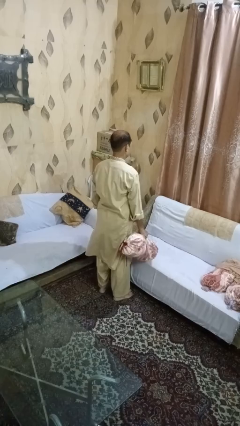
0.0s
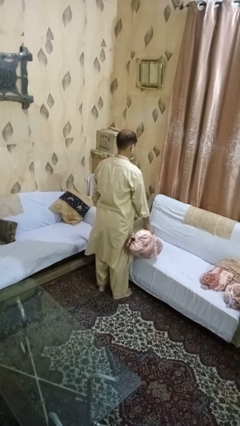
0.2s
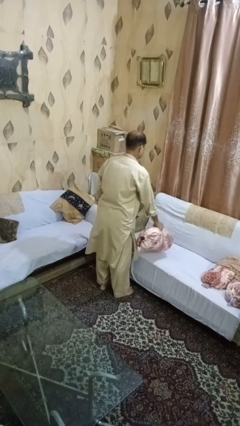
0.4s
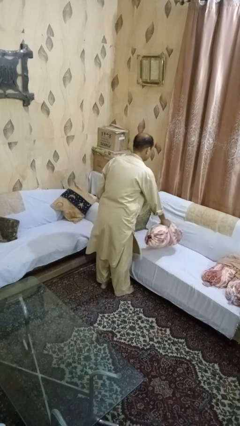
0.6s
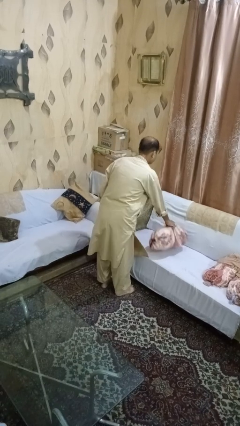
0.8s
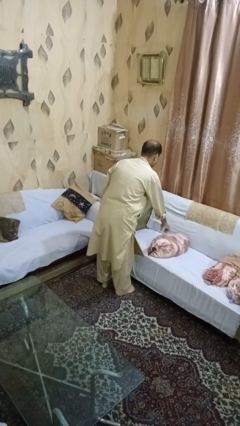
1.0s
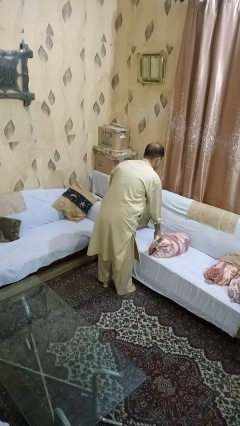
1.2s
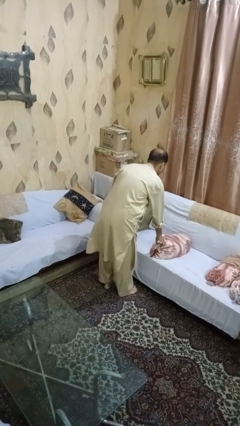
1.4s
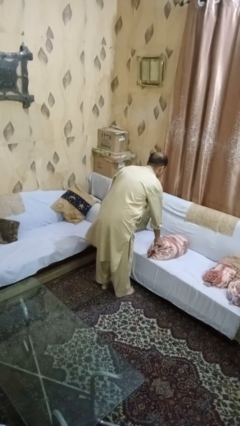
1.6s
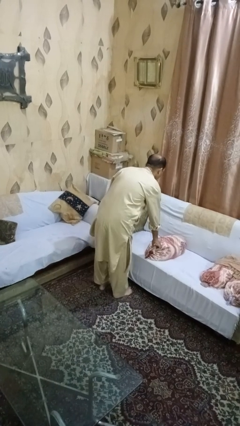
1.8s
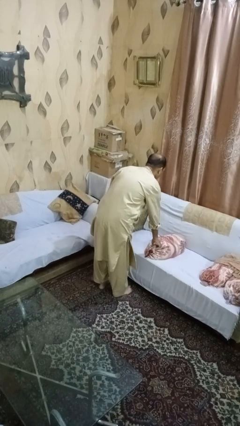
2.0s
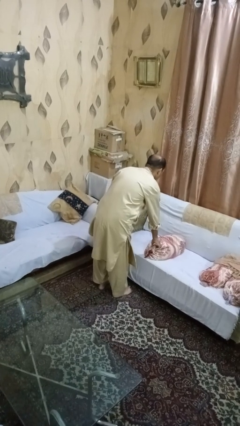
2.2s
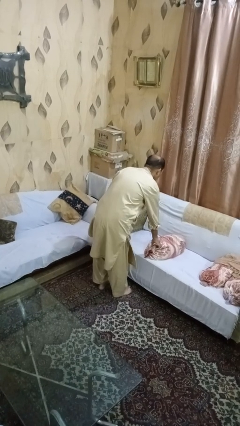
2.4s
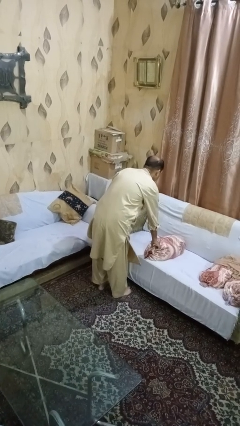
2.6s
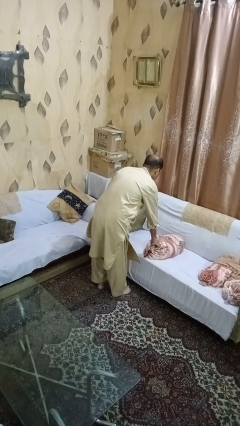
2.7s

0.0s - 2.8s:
person puts down object on couch

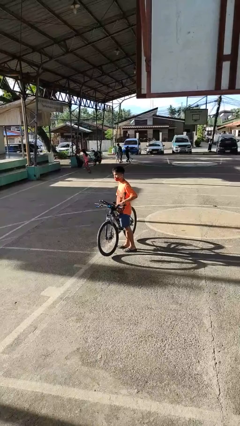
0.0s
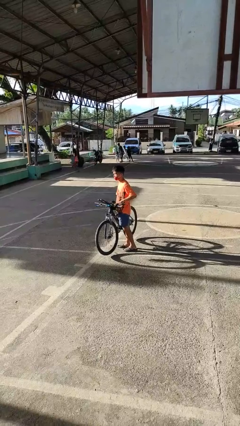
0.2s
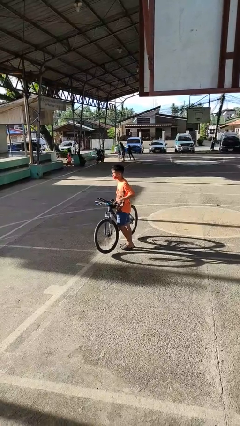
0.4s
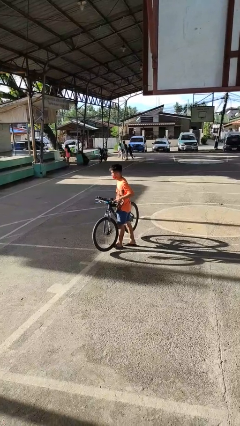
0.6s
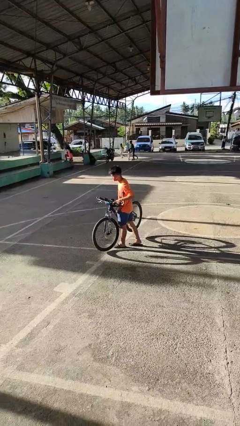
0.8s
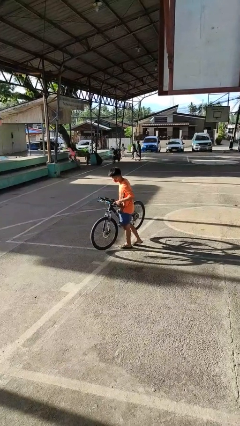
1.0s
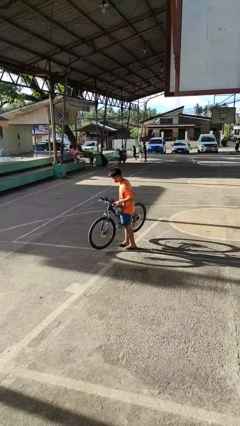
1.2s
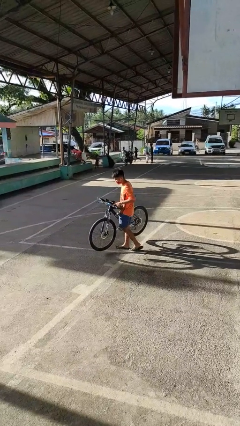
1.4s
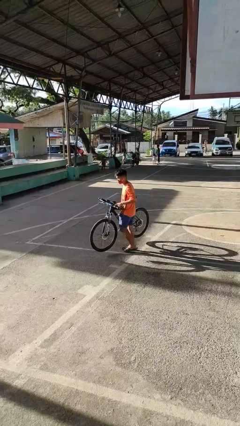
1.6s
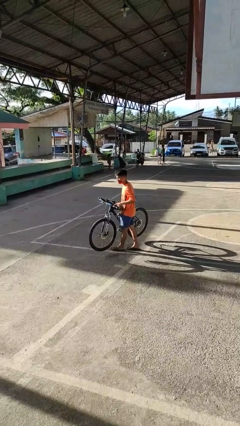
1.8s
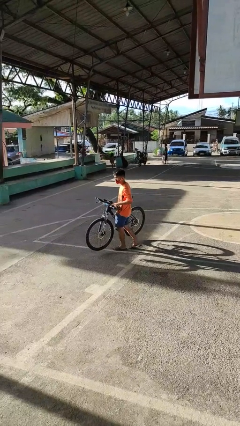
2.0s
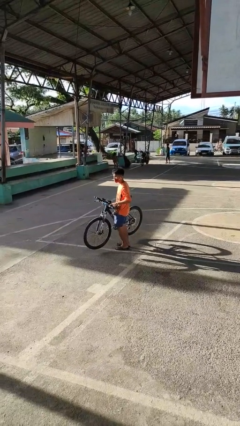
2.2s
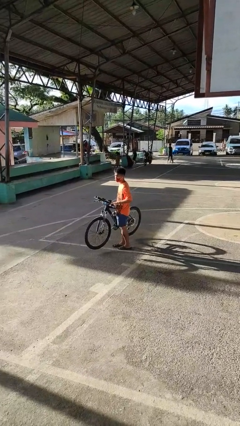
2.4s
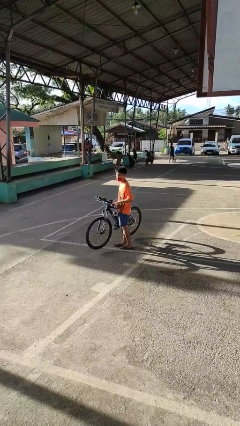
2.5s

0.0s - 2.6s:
person carries bicycle

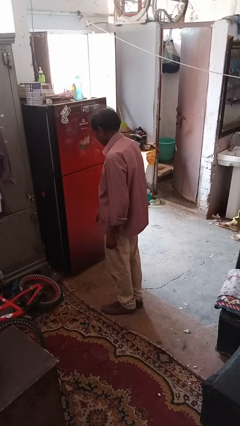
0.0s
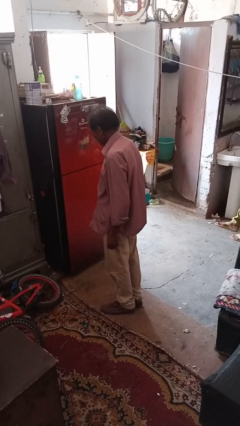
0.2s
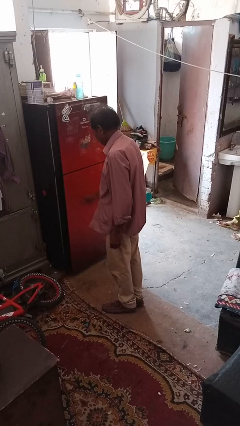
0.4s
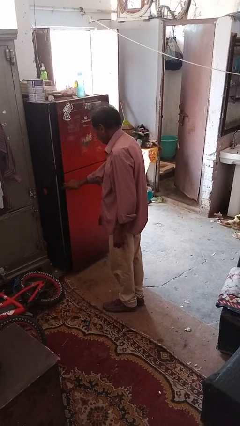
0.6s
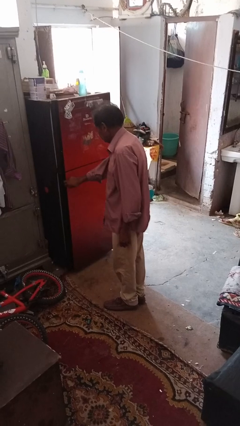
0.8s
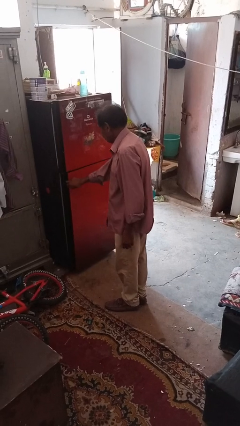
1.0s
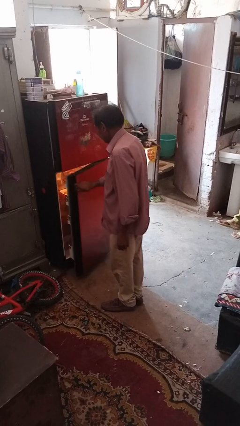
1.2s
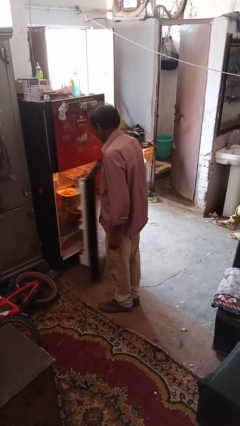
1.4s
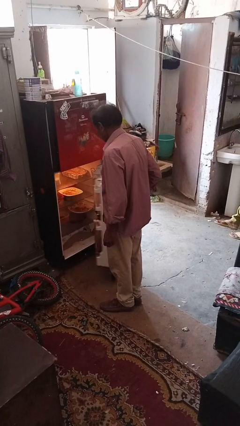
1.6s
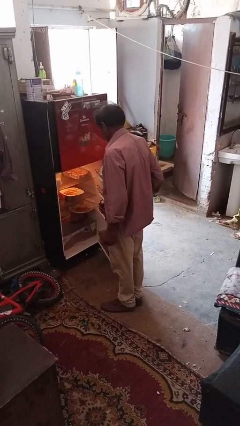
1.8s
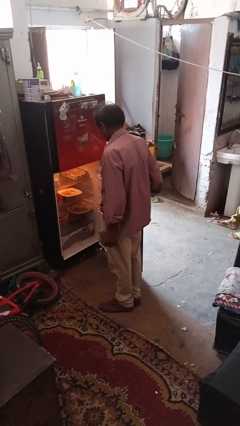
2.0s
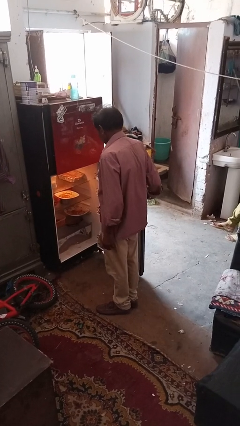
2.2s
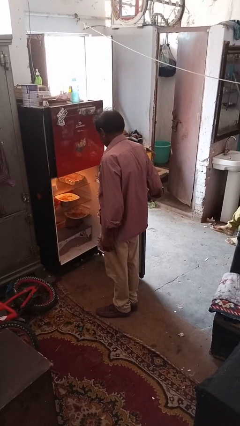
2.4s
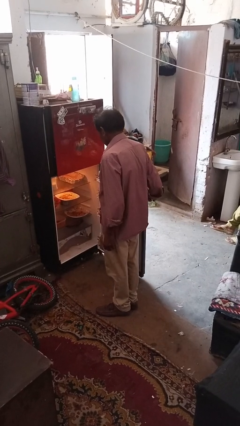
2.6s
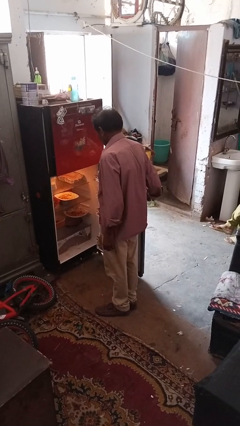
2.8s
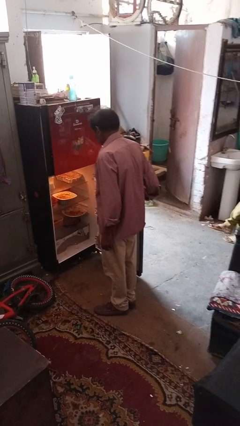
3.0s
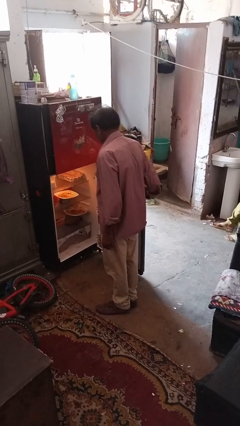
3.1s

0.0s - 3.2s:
person opens refrigerator

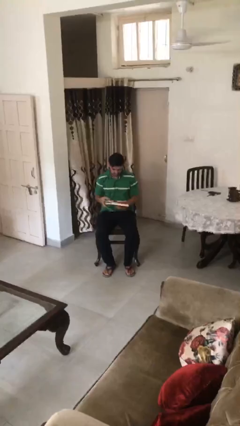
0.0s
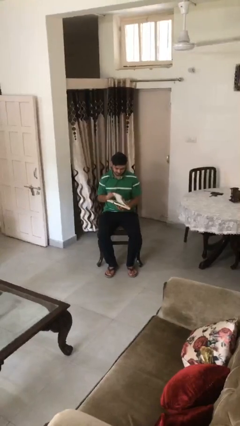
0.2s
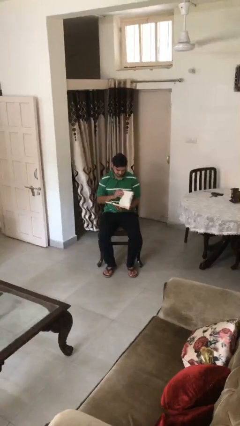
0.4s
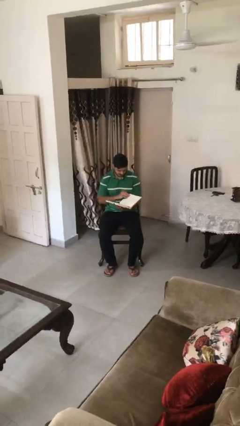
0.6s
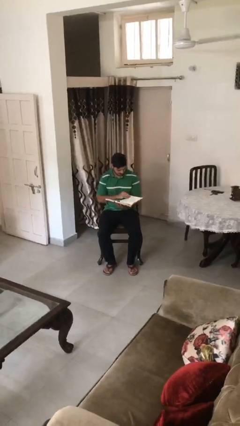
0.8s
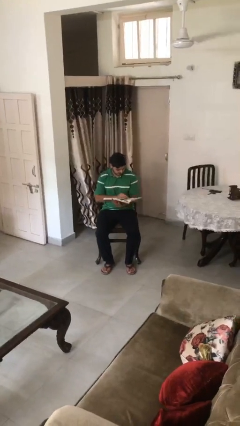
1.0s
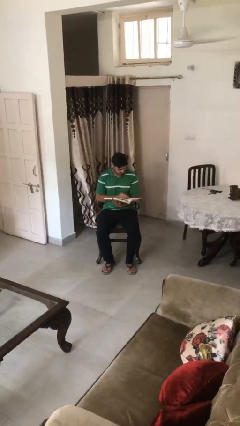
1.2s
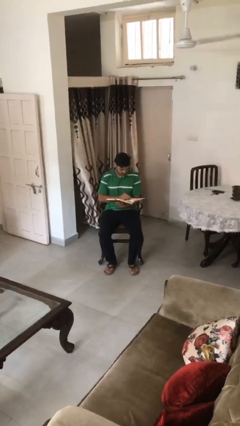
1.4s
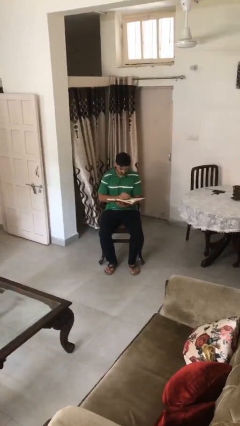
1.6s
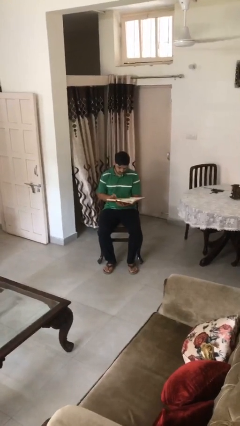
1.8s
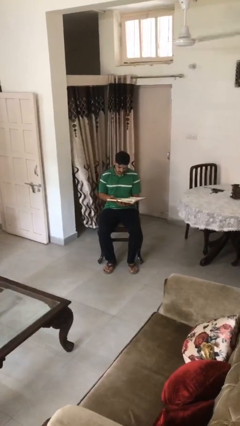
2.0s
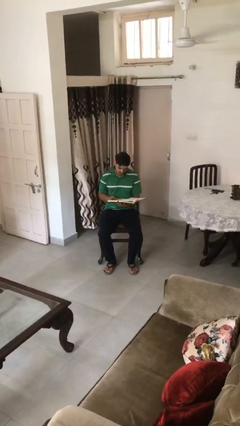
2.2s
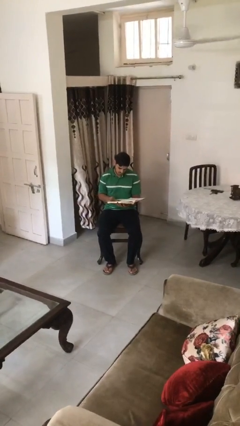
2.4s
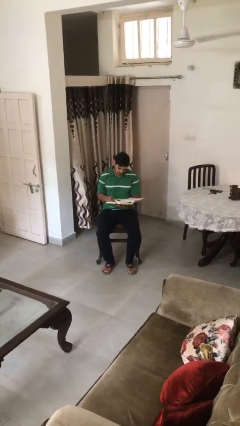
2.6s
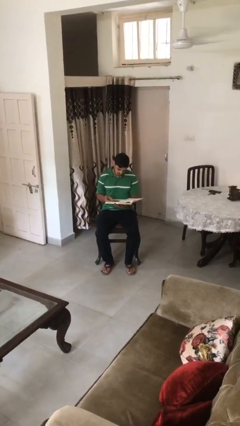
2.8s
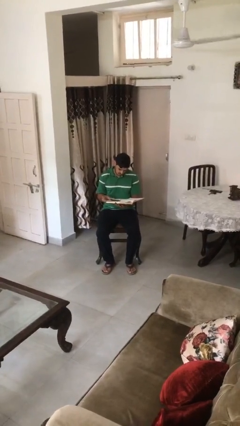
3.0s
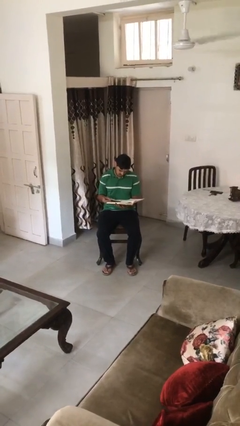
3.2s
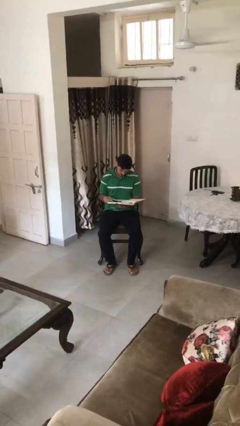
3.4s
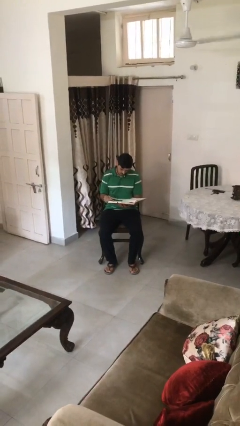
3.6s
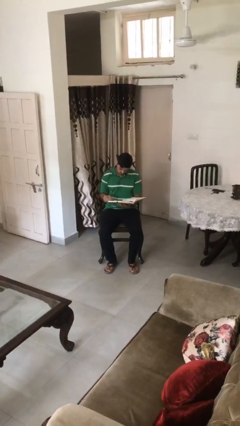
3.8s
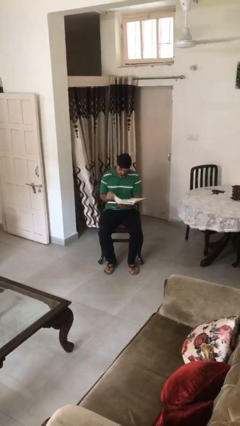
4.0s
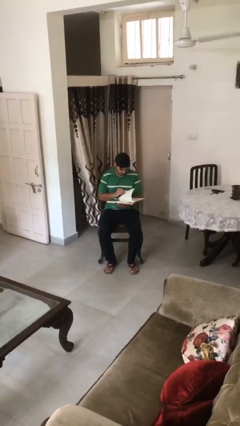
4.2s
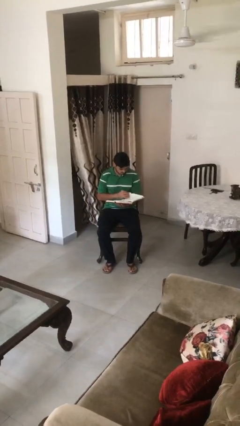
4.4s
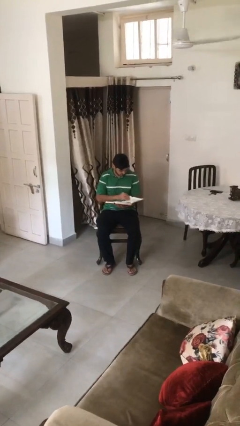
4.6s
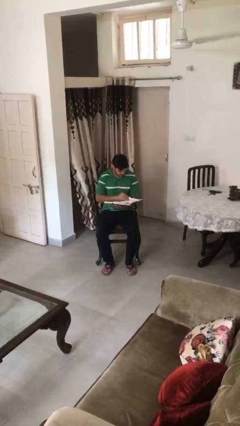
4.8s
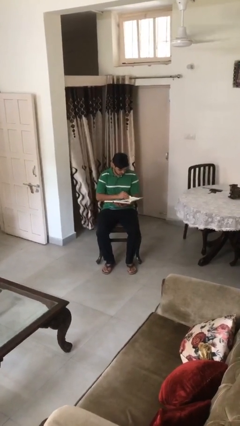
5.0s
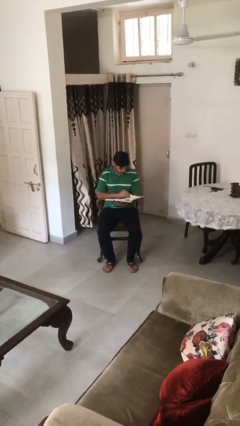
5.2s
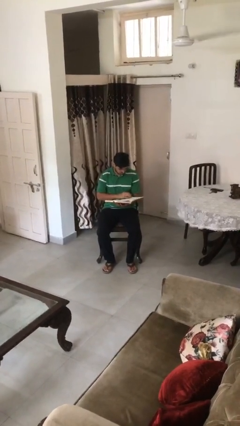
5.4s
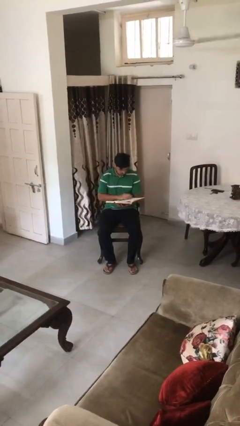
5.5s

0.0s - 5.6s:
person reads document

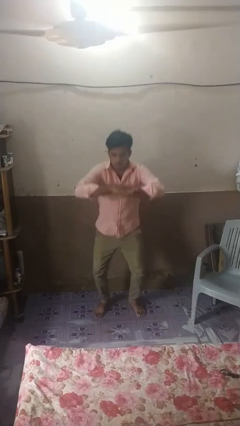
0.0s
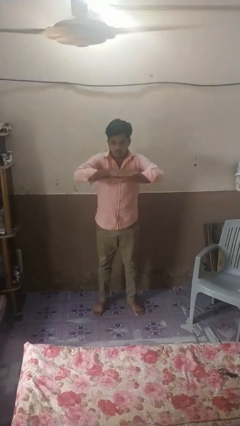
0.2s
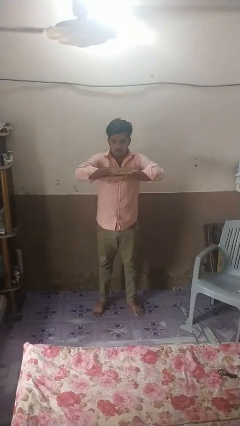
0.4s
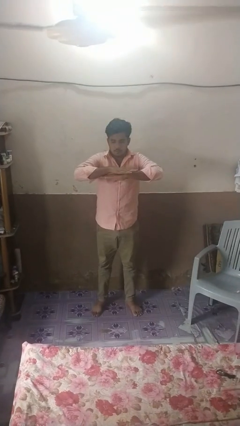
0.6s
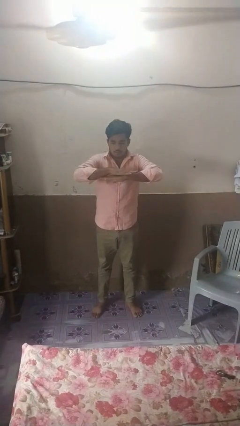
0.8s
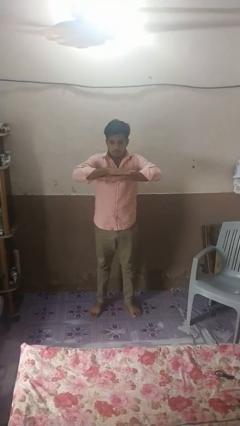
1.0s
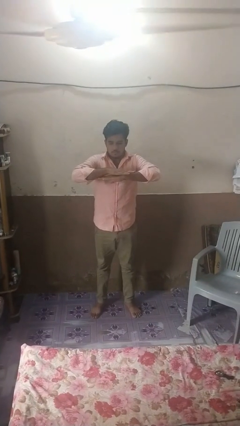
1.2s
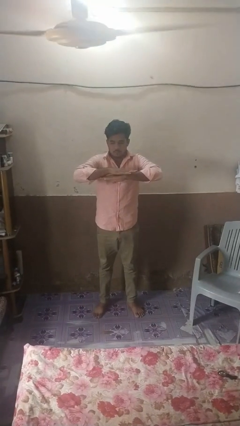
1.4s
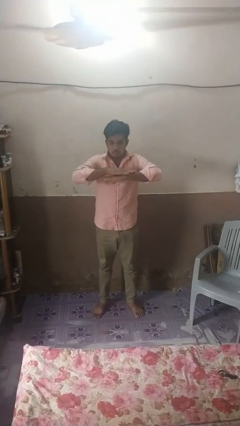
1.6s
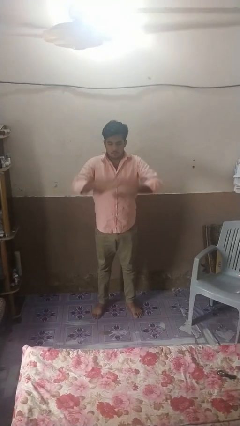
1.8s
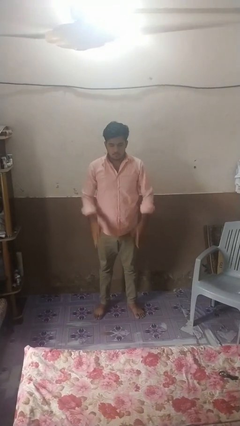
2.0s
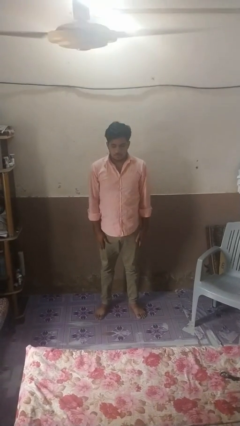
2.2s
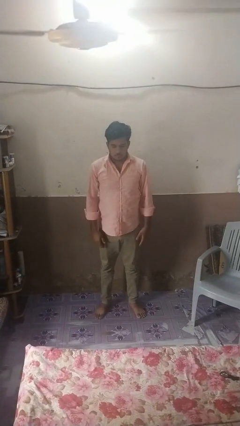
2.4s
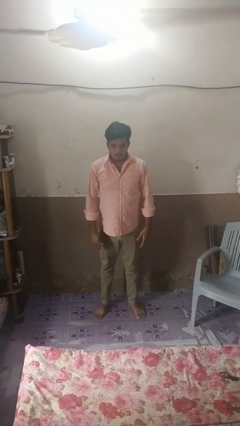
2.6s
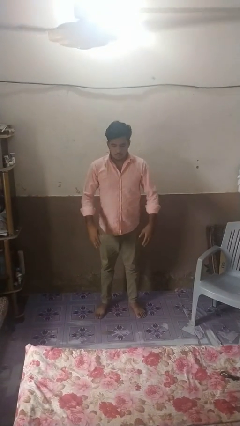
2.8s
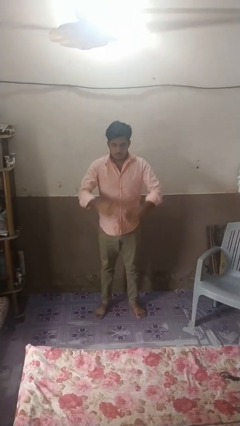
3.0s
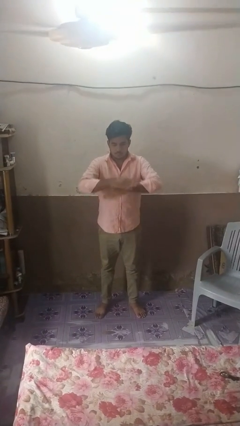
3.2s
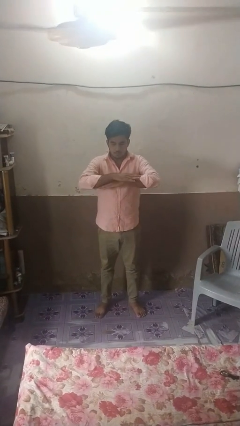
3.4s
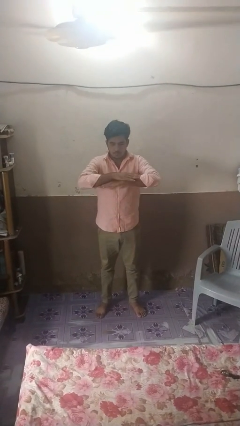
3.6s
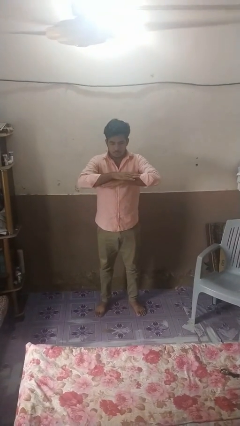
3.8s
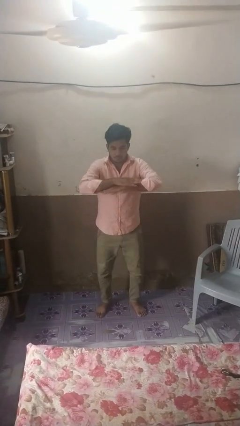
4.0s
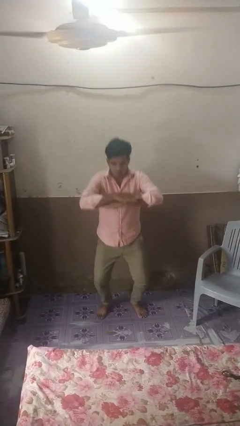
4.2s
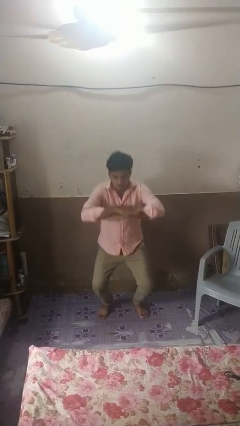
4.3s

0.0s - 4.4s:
person stands up
